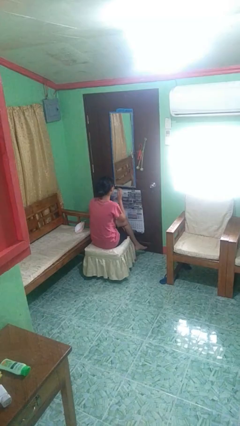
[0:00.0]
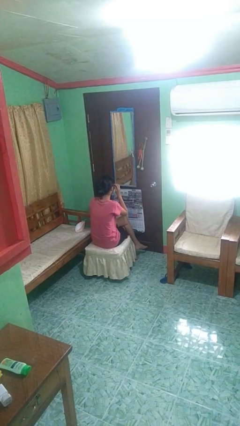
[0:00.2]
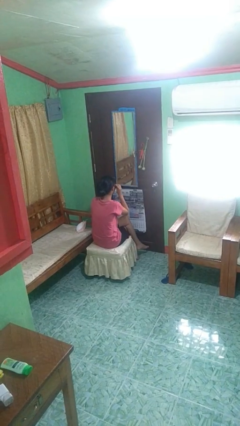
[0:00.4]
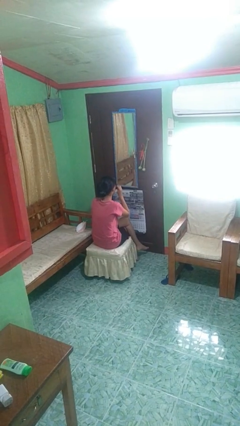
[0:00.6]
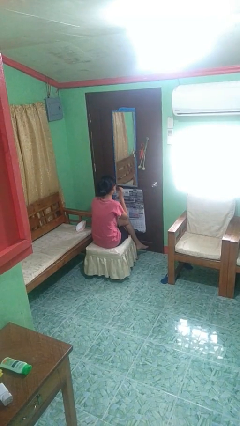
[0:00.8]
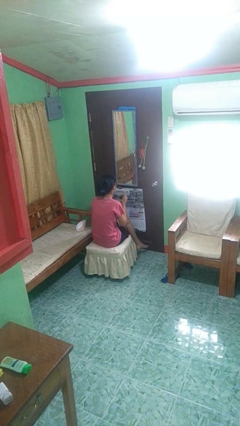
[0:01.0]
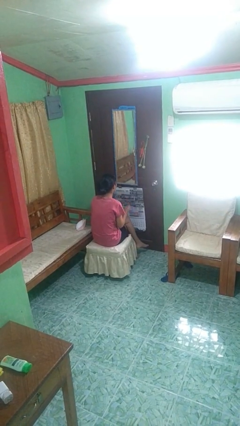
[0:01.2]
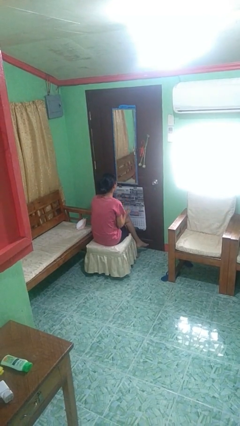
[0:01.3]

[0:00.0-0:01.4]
person takes off sunglasses

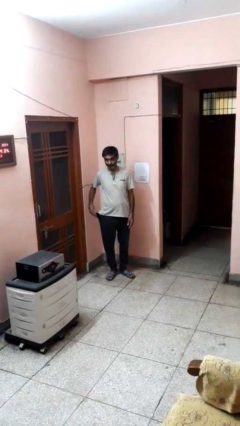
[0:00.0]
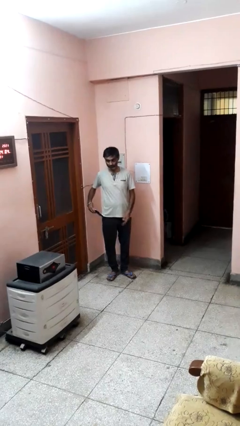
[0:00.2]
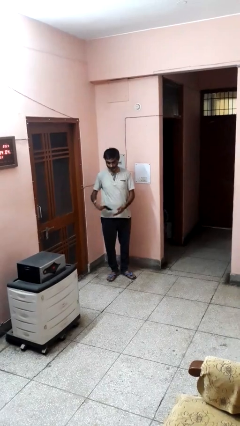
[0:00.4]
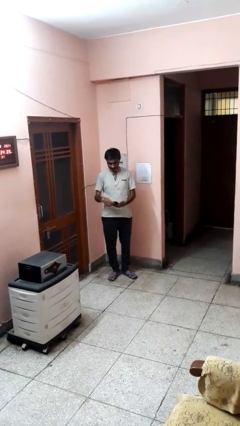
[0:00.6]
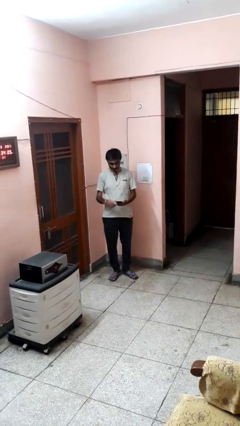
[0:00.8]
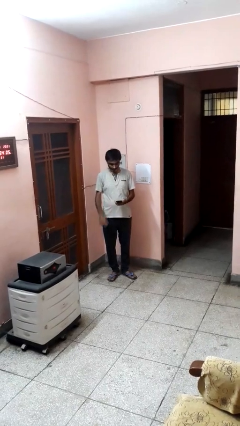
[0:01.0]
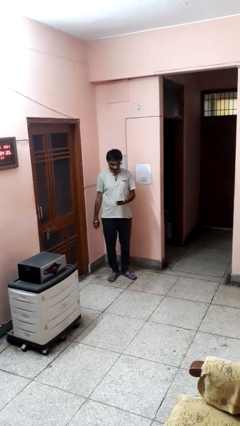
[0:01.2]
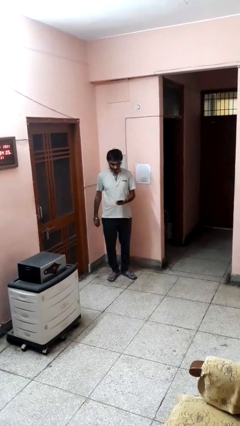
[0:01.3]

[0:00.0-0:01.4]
person takes phone from pocket

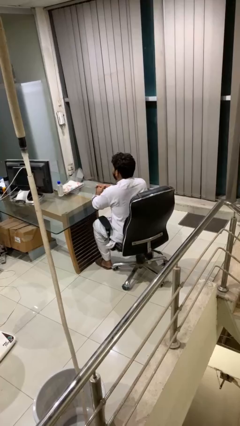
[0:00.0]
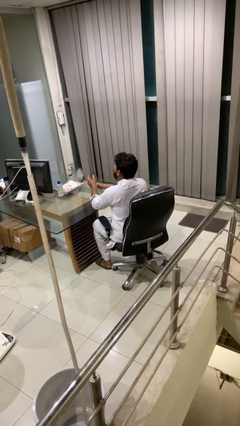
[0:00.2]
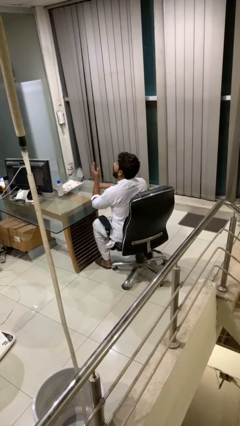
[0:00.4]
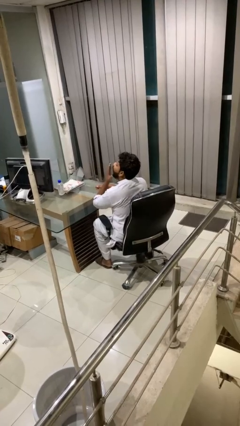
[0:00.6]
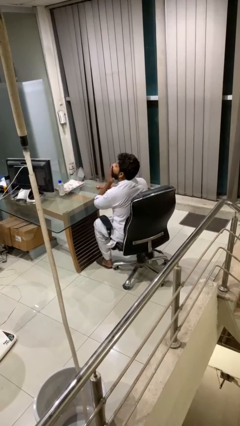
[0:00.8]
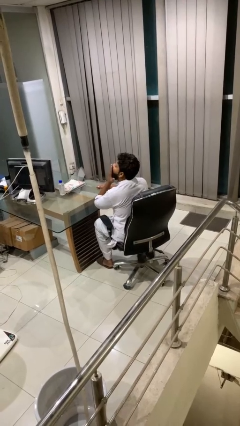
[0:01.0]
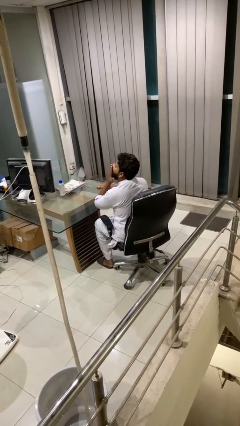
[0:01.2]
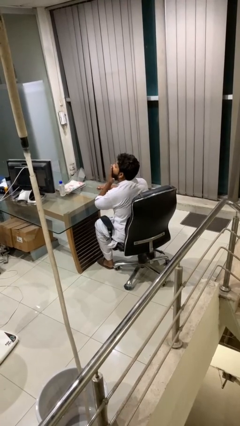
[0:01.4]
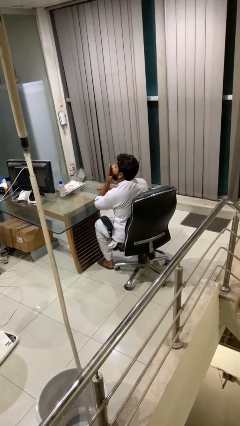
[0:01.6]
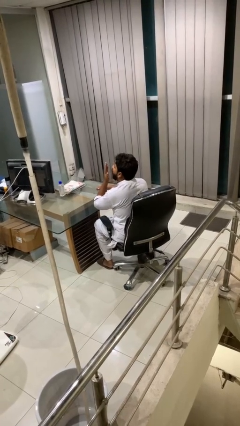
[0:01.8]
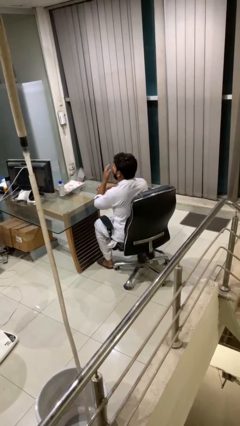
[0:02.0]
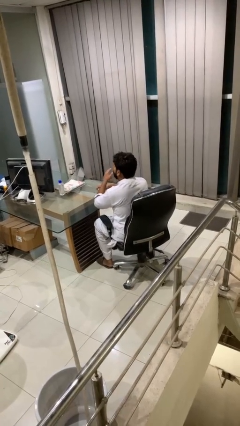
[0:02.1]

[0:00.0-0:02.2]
person yawns

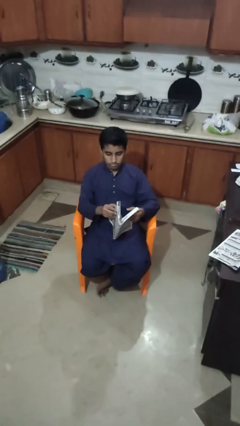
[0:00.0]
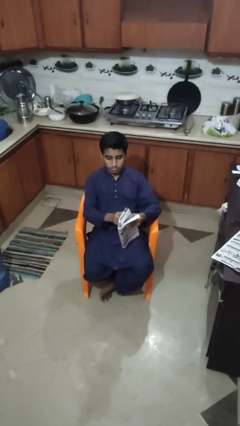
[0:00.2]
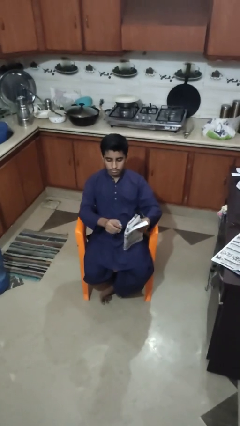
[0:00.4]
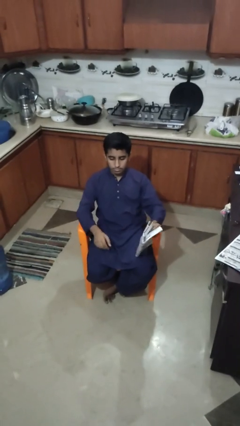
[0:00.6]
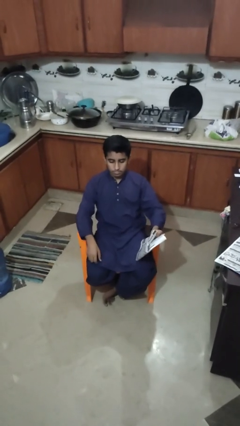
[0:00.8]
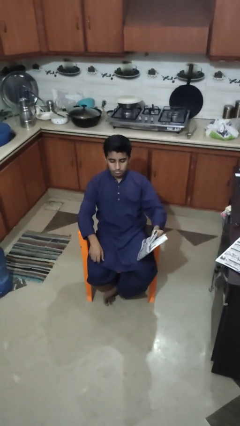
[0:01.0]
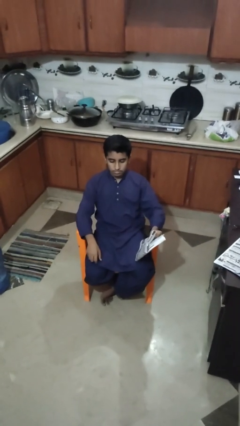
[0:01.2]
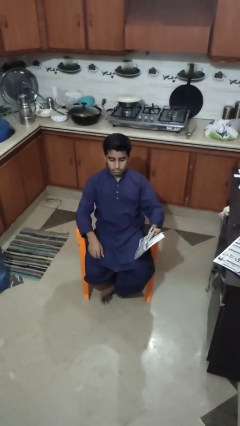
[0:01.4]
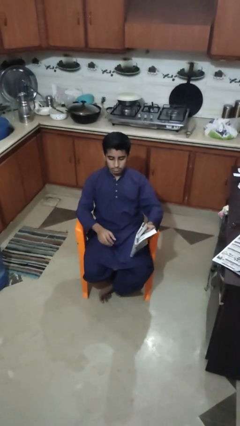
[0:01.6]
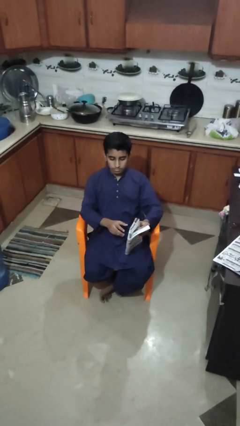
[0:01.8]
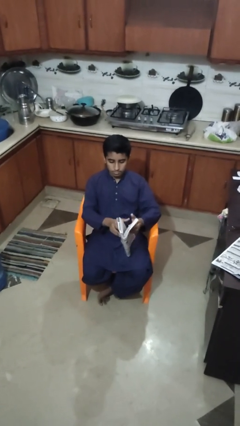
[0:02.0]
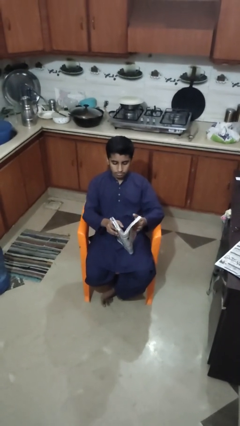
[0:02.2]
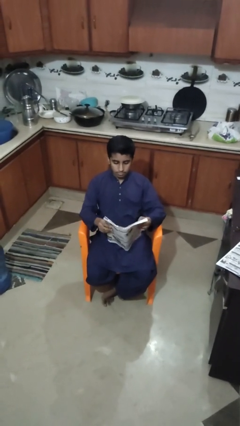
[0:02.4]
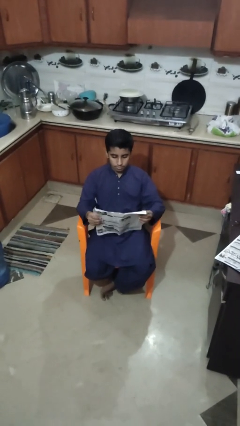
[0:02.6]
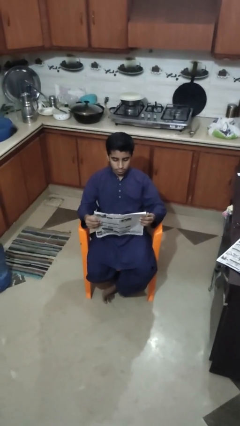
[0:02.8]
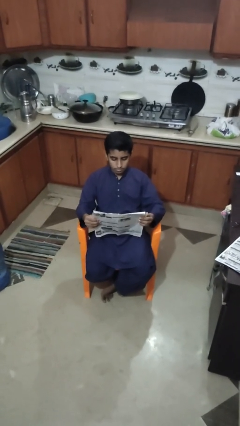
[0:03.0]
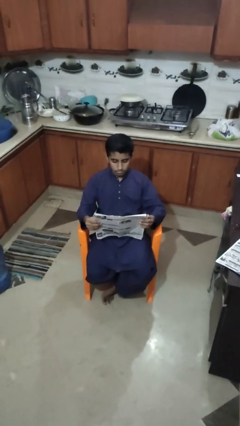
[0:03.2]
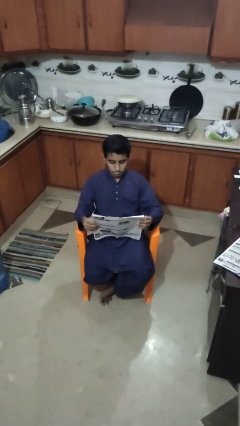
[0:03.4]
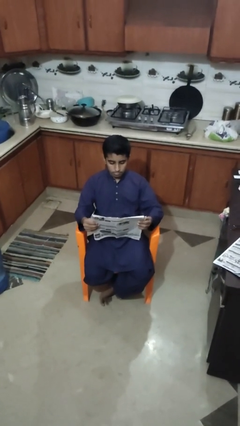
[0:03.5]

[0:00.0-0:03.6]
person reads newspaper

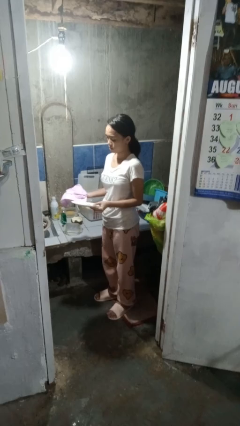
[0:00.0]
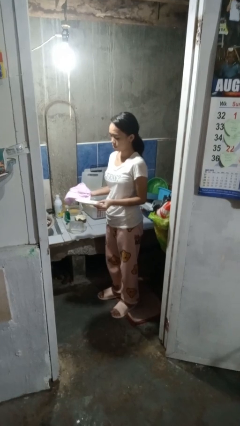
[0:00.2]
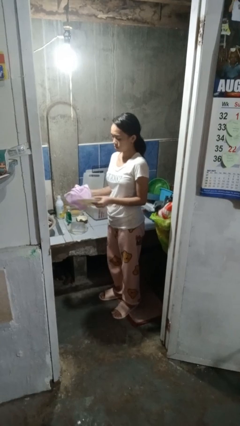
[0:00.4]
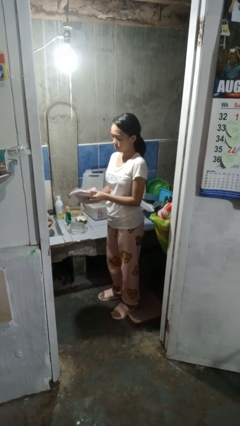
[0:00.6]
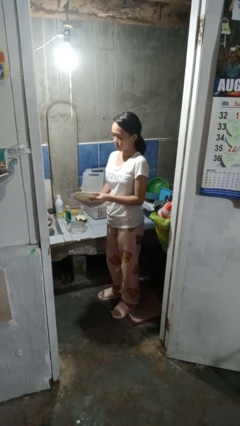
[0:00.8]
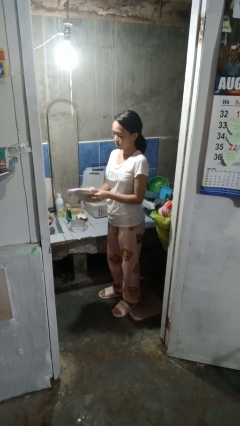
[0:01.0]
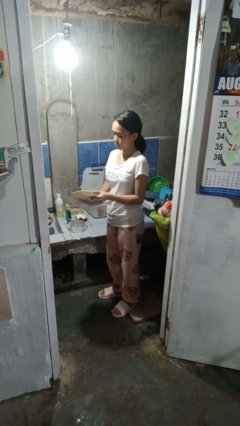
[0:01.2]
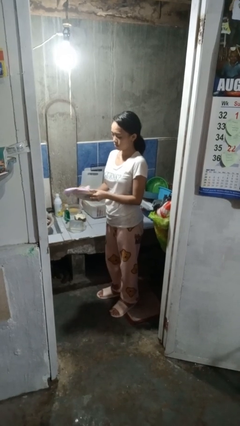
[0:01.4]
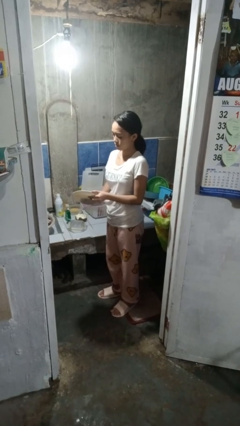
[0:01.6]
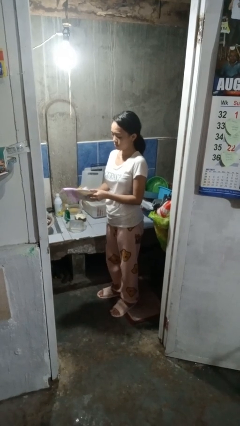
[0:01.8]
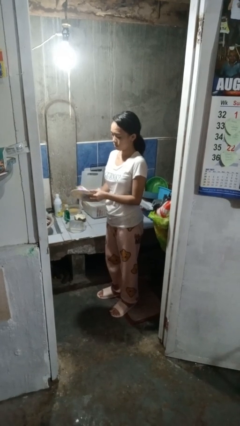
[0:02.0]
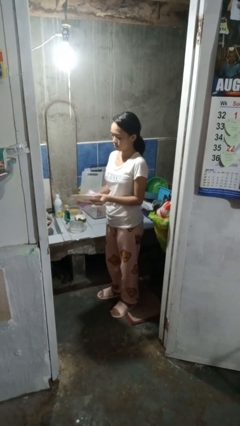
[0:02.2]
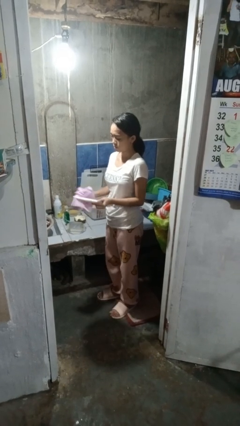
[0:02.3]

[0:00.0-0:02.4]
person dries dish

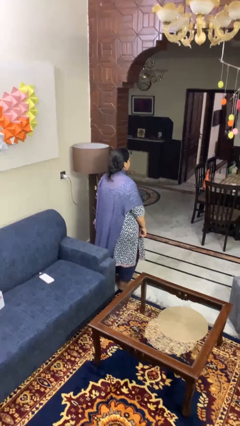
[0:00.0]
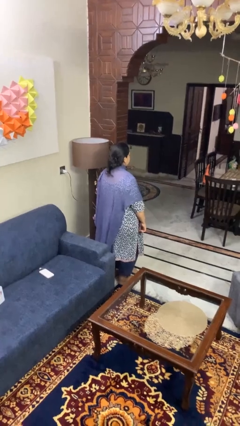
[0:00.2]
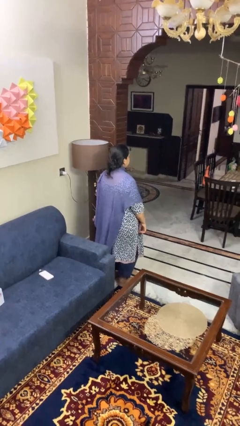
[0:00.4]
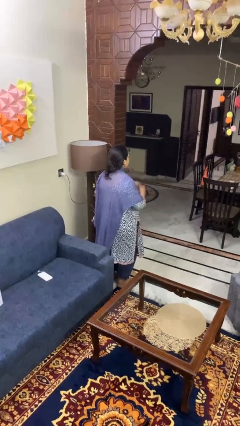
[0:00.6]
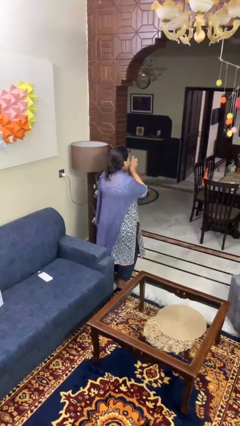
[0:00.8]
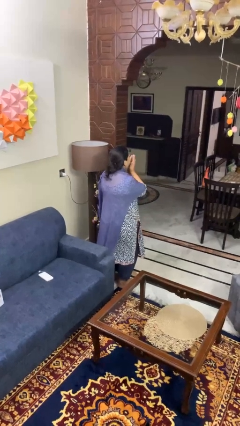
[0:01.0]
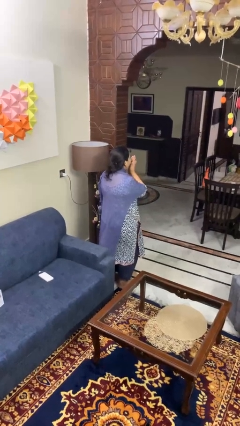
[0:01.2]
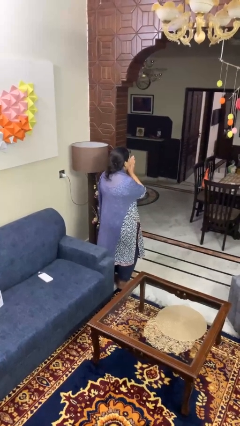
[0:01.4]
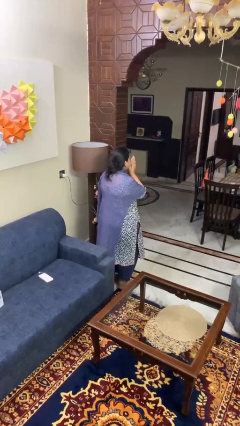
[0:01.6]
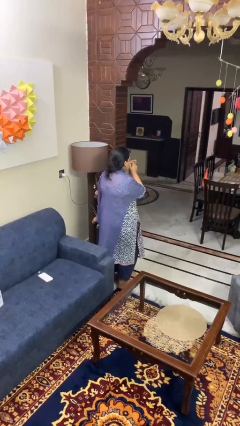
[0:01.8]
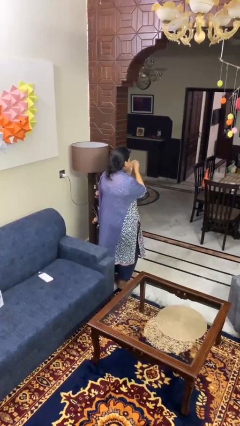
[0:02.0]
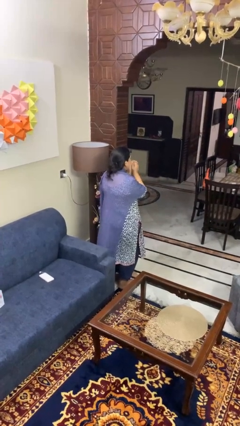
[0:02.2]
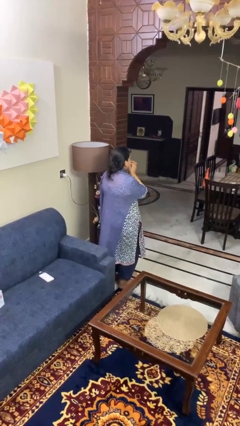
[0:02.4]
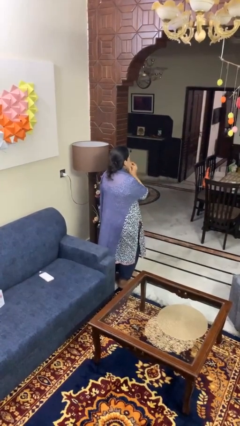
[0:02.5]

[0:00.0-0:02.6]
person blows into hands

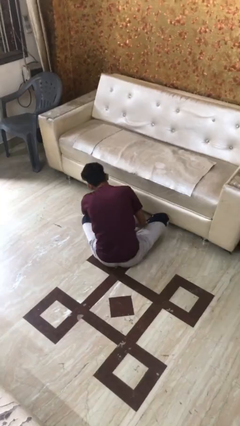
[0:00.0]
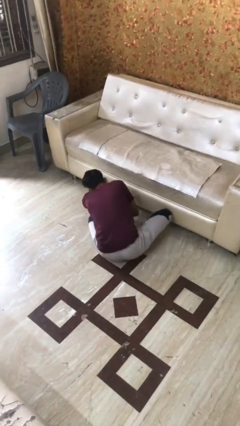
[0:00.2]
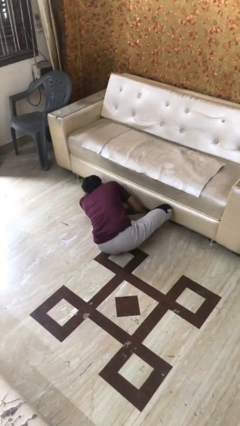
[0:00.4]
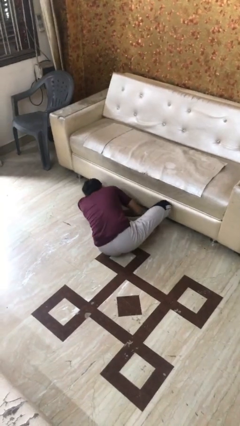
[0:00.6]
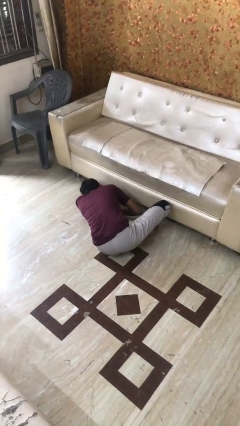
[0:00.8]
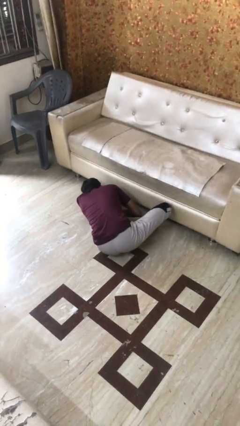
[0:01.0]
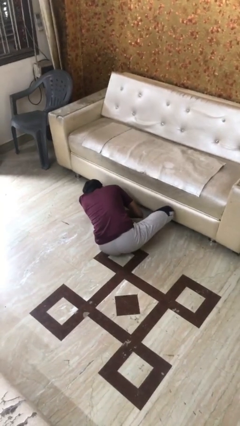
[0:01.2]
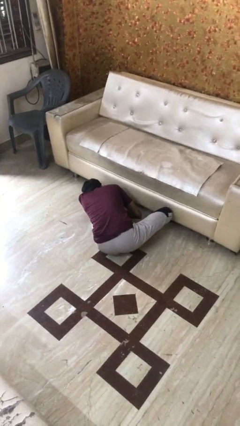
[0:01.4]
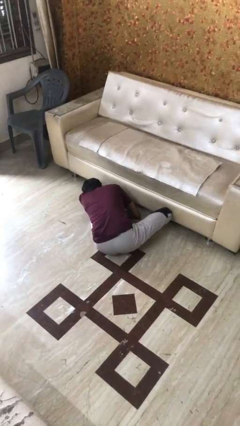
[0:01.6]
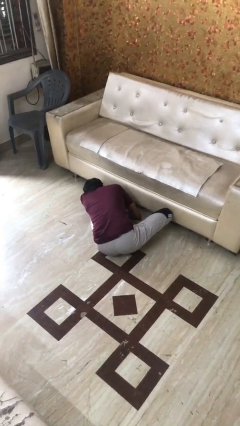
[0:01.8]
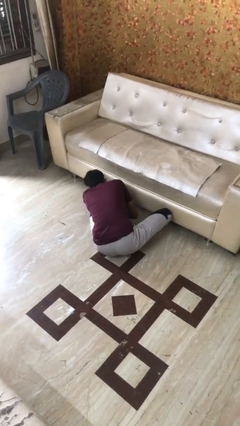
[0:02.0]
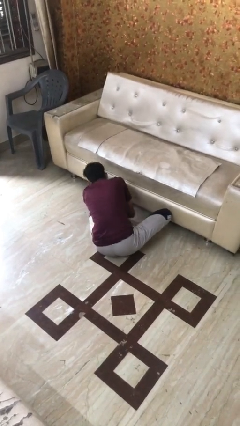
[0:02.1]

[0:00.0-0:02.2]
person searches under bed

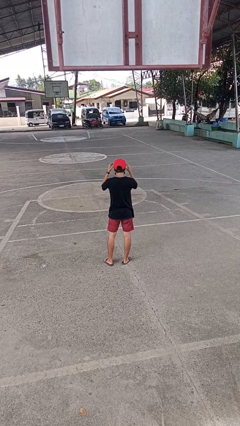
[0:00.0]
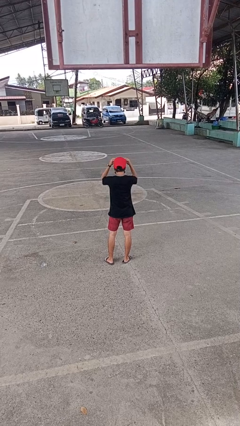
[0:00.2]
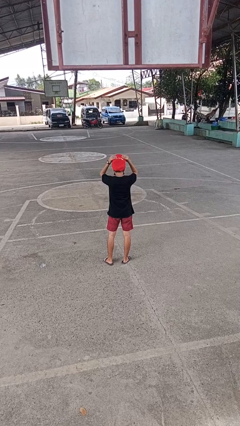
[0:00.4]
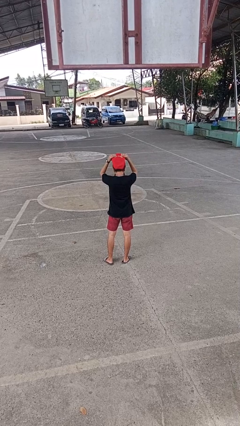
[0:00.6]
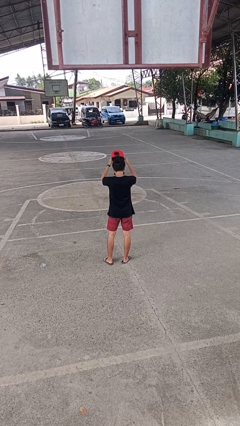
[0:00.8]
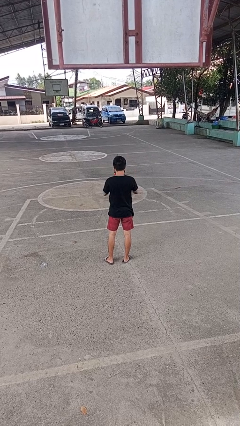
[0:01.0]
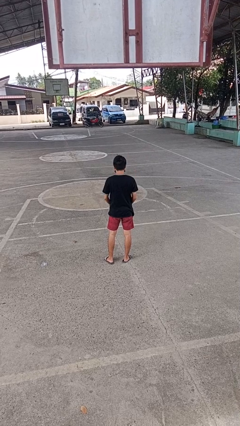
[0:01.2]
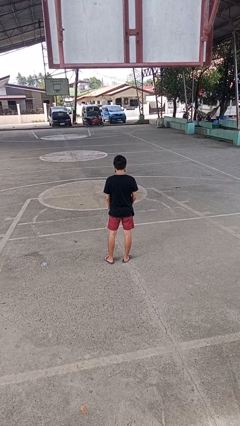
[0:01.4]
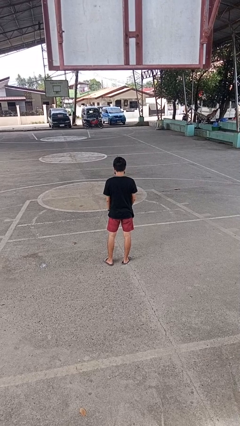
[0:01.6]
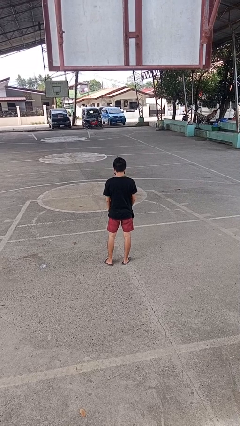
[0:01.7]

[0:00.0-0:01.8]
person takes off hat
